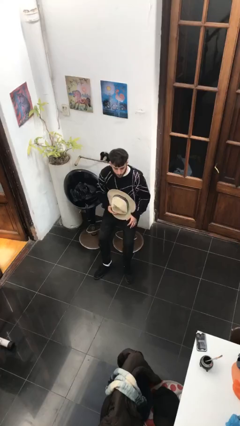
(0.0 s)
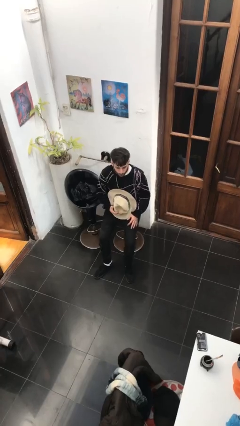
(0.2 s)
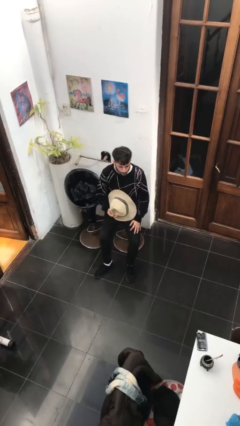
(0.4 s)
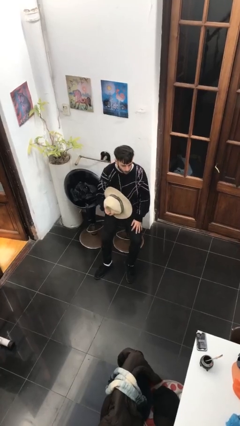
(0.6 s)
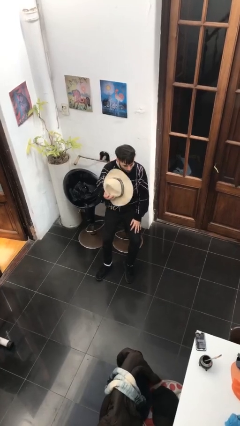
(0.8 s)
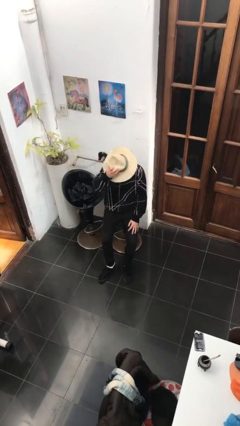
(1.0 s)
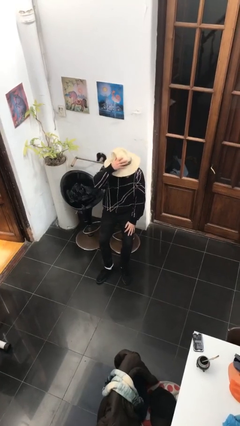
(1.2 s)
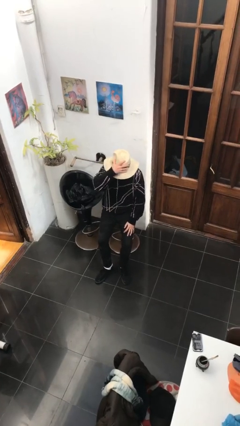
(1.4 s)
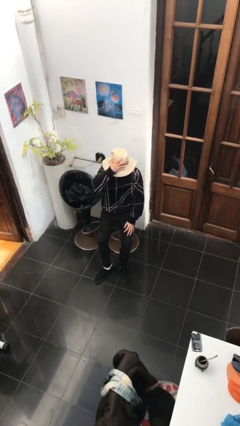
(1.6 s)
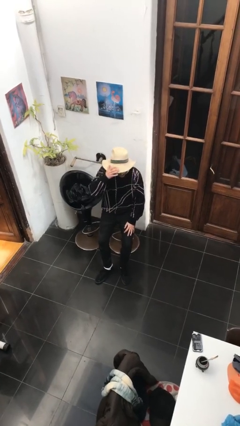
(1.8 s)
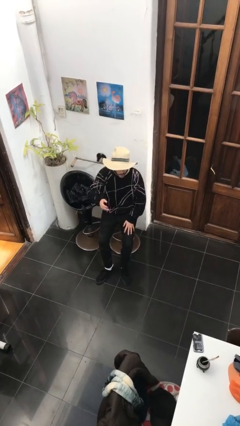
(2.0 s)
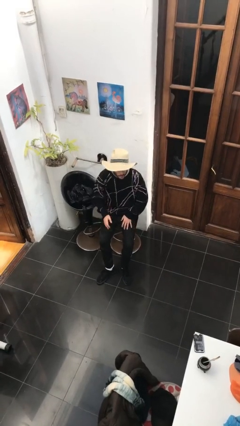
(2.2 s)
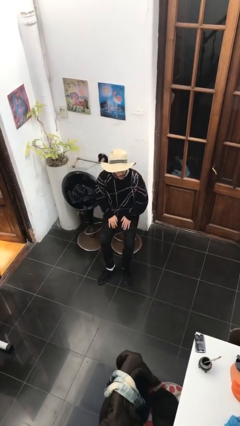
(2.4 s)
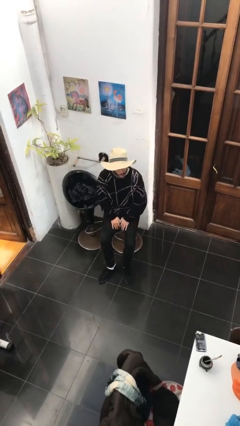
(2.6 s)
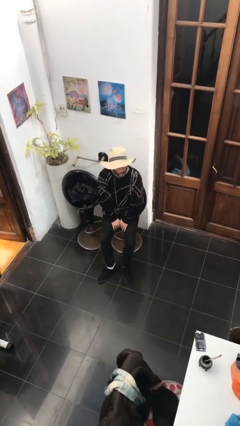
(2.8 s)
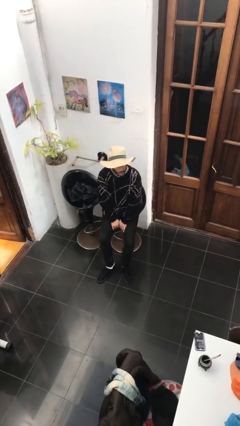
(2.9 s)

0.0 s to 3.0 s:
person puts on hat

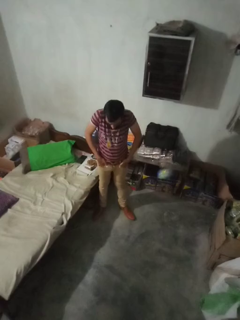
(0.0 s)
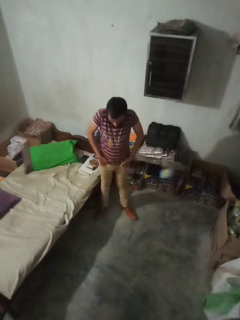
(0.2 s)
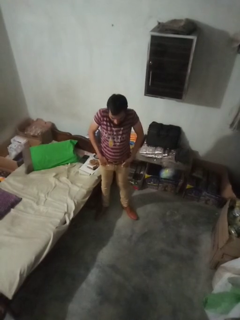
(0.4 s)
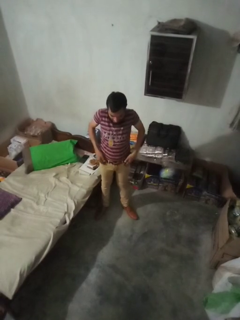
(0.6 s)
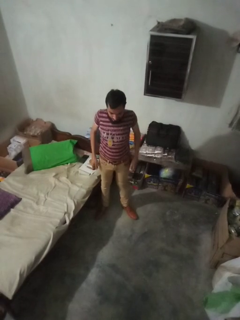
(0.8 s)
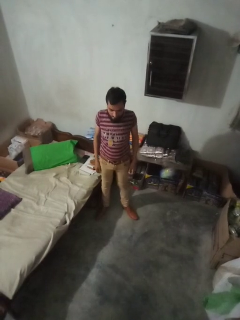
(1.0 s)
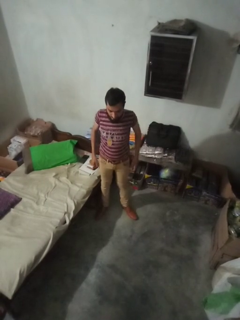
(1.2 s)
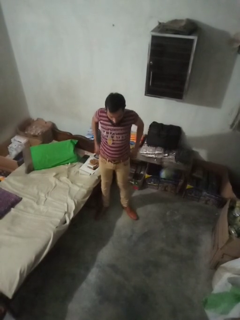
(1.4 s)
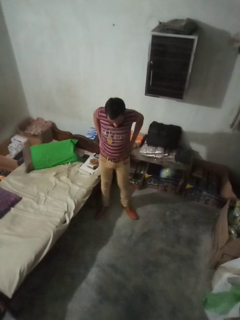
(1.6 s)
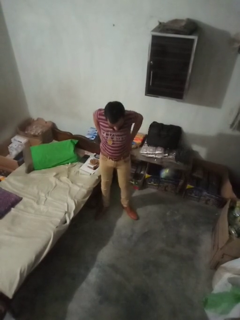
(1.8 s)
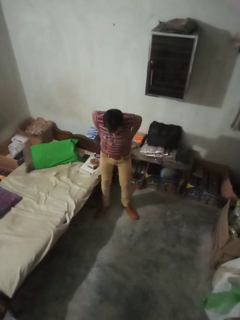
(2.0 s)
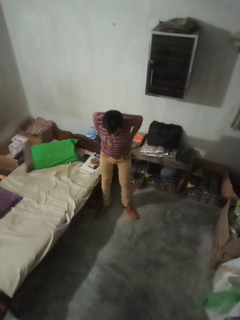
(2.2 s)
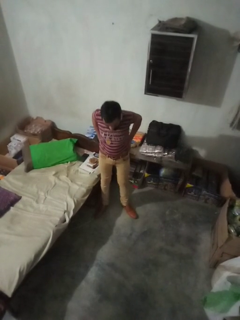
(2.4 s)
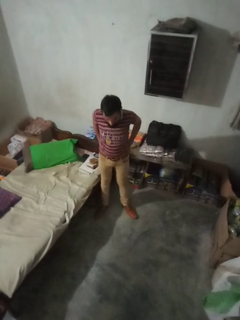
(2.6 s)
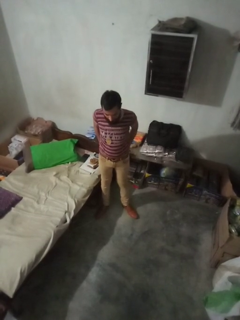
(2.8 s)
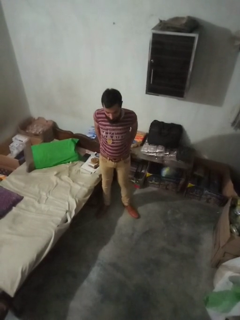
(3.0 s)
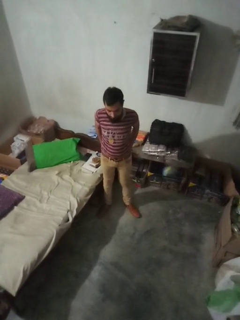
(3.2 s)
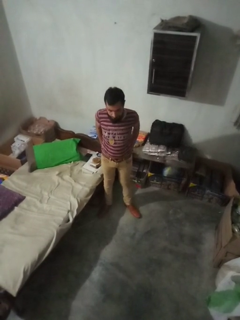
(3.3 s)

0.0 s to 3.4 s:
person puts hands in back pockets

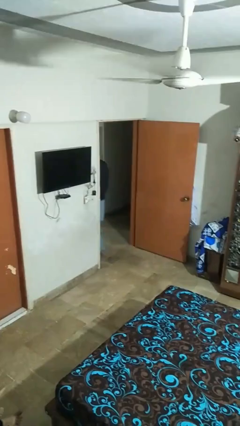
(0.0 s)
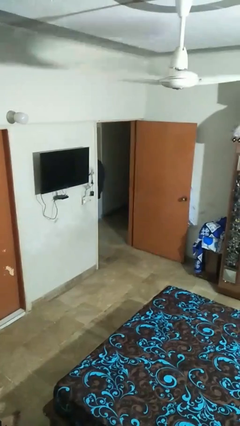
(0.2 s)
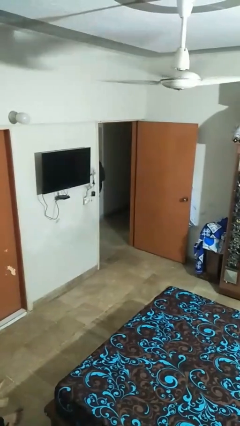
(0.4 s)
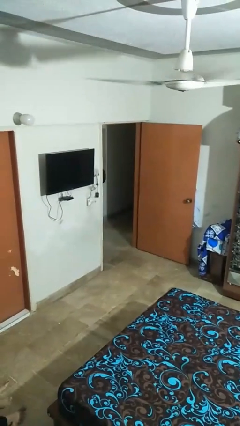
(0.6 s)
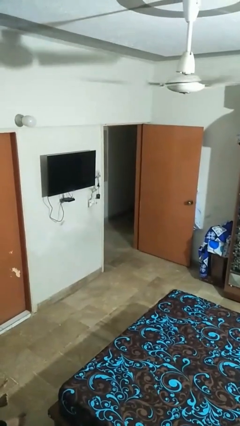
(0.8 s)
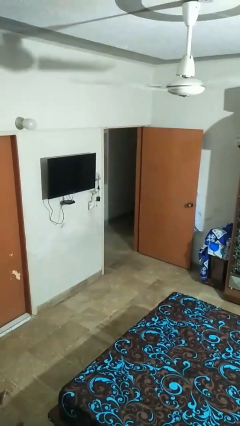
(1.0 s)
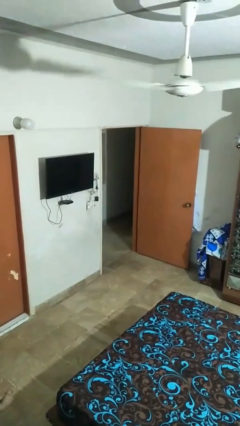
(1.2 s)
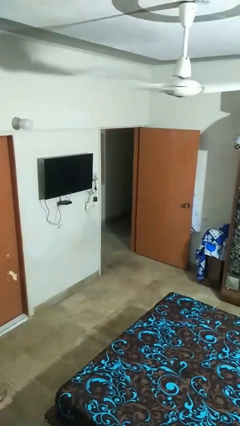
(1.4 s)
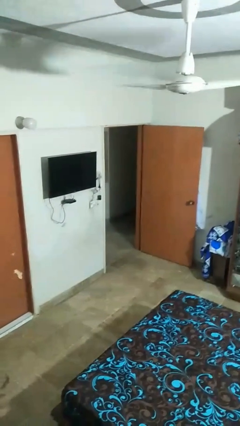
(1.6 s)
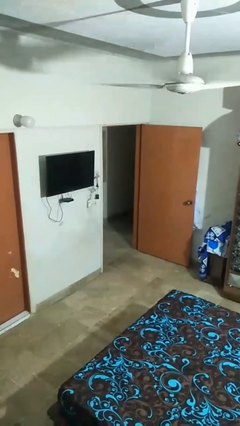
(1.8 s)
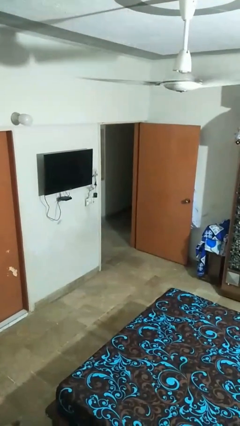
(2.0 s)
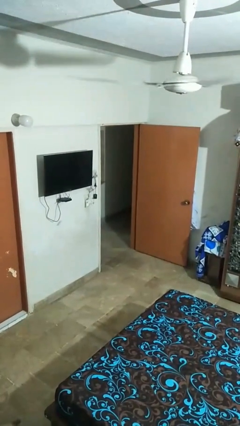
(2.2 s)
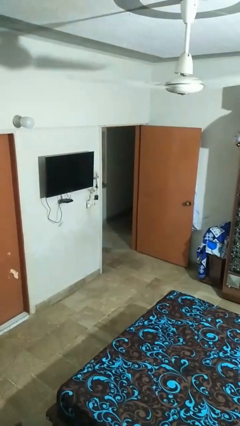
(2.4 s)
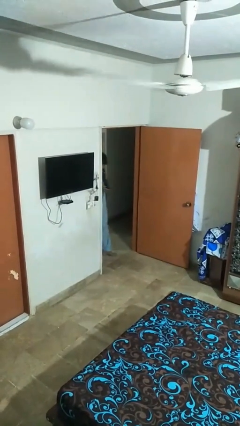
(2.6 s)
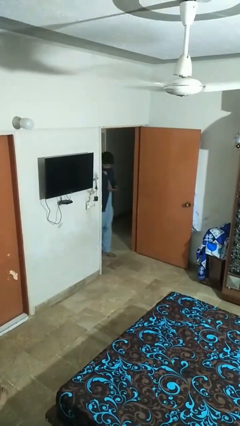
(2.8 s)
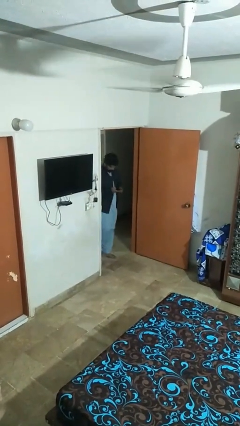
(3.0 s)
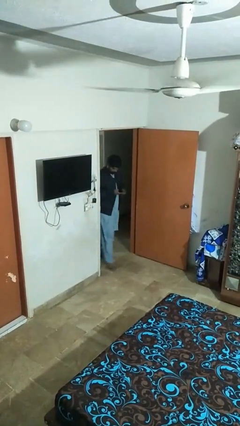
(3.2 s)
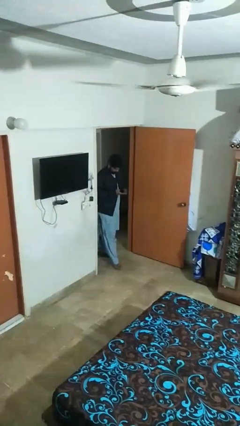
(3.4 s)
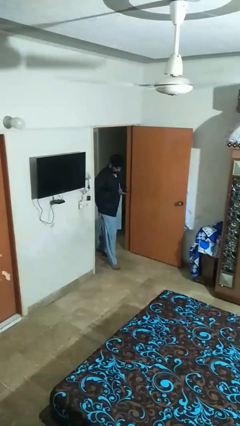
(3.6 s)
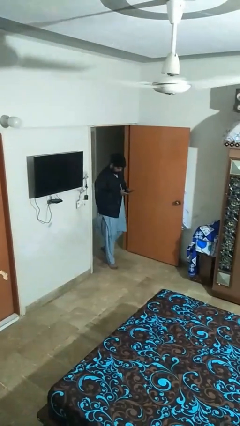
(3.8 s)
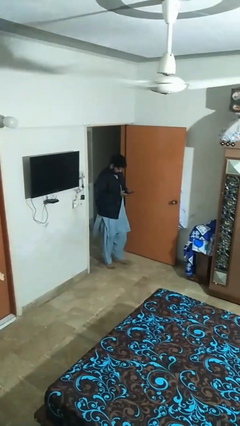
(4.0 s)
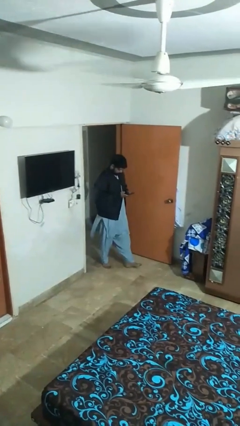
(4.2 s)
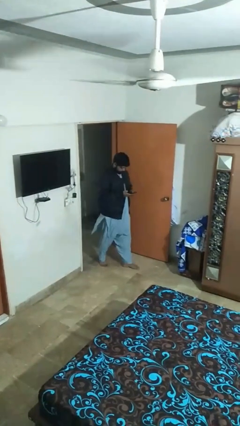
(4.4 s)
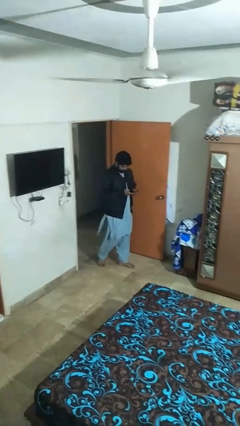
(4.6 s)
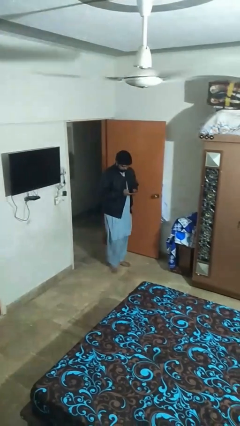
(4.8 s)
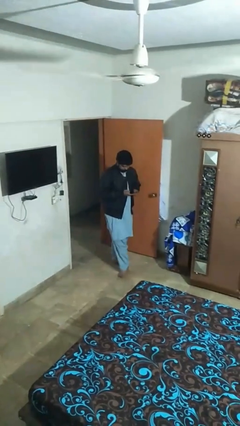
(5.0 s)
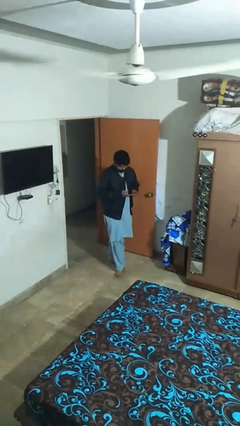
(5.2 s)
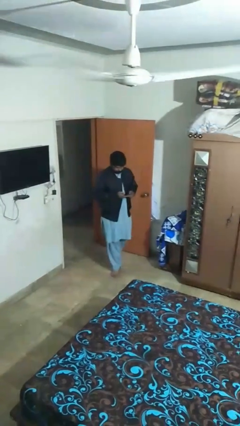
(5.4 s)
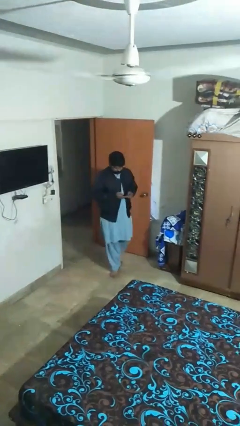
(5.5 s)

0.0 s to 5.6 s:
person enters scene through structure

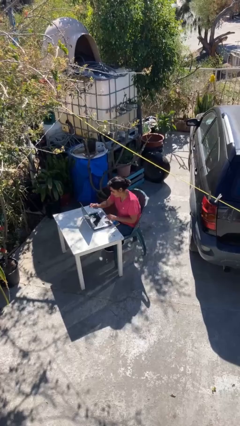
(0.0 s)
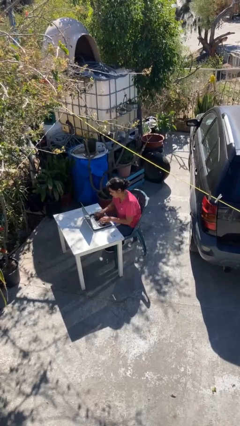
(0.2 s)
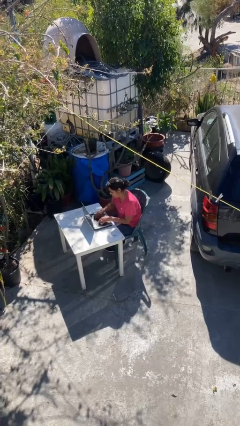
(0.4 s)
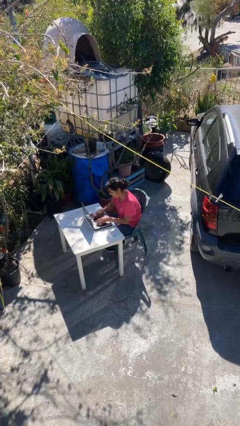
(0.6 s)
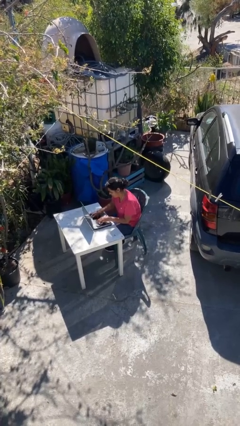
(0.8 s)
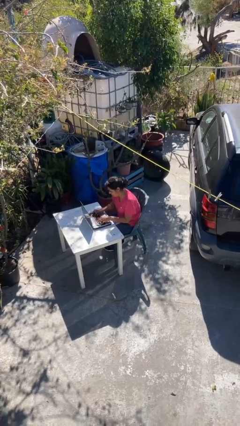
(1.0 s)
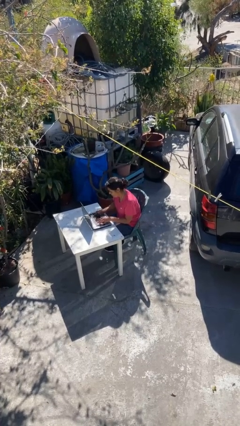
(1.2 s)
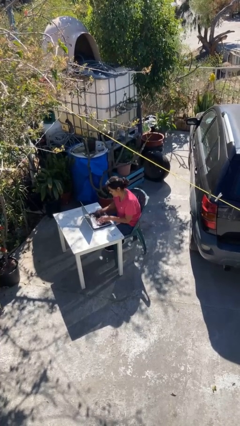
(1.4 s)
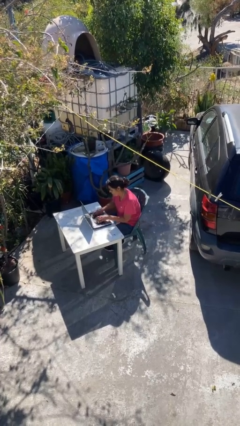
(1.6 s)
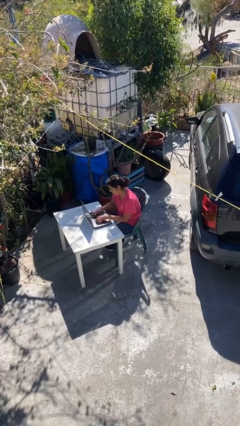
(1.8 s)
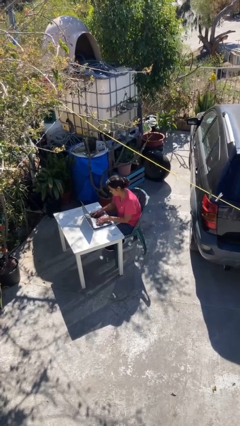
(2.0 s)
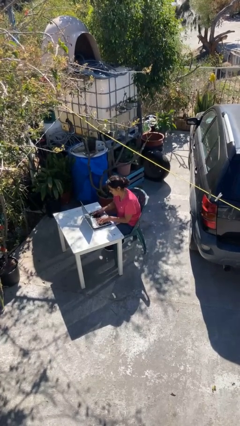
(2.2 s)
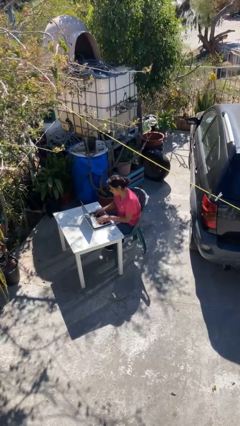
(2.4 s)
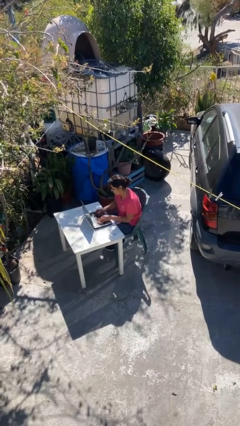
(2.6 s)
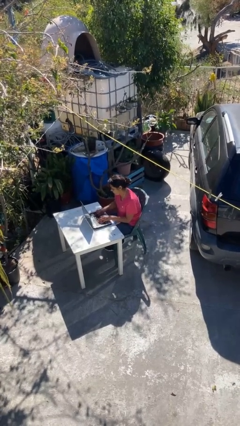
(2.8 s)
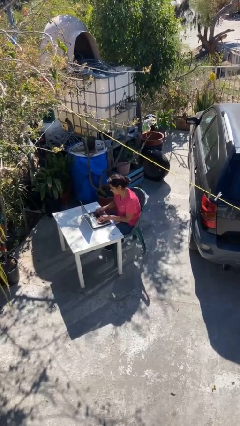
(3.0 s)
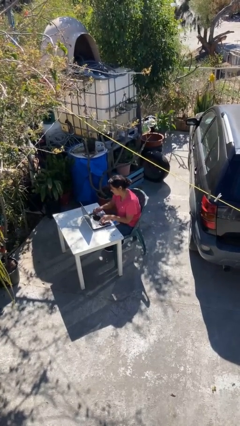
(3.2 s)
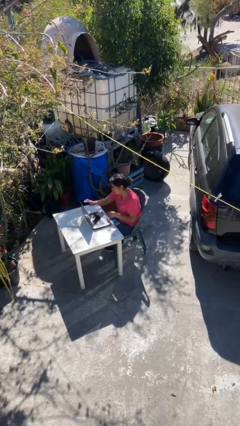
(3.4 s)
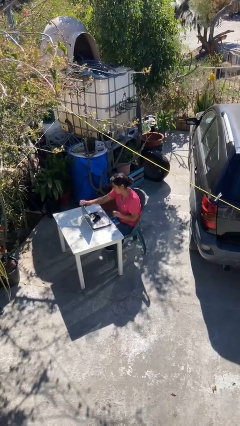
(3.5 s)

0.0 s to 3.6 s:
person interacts with laptop

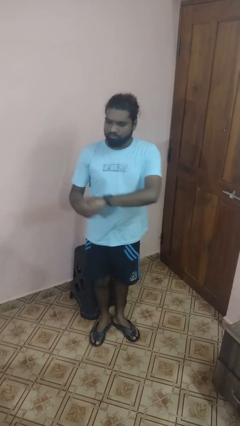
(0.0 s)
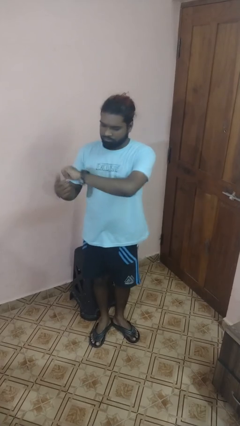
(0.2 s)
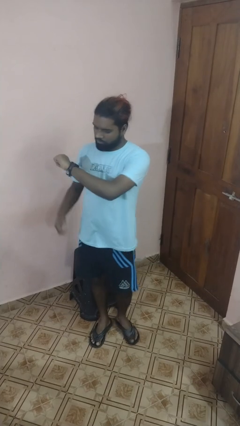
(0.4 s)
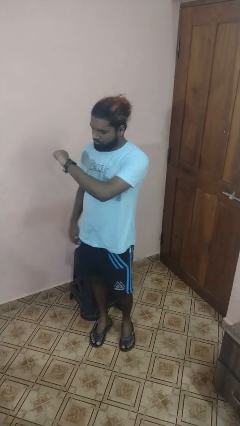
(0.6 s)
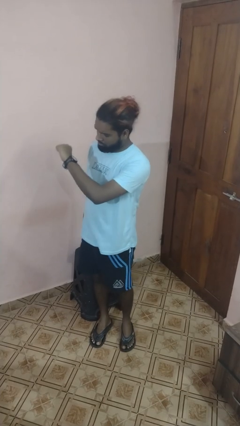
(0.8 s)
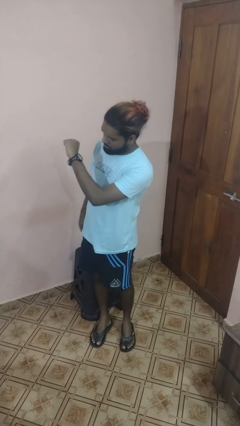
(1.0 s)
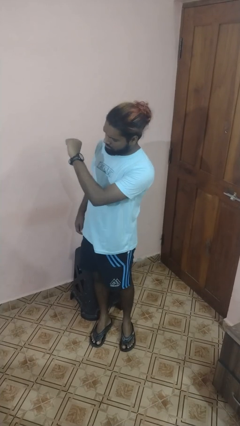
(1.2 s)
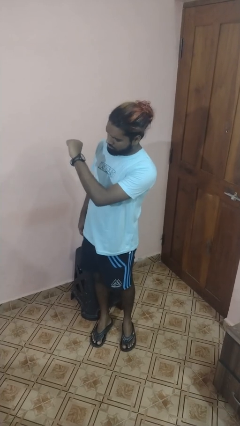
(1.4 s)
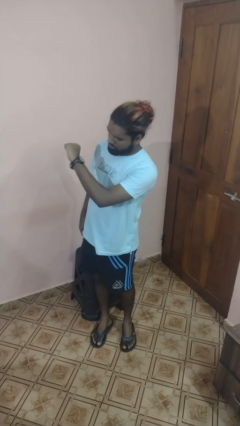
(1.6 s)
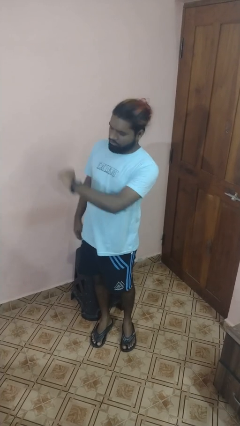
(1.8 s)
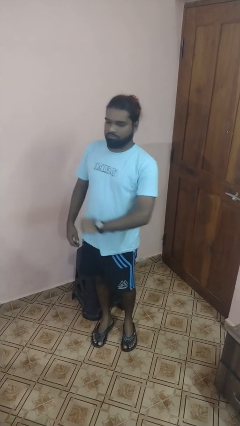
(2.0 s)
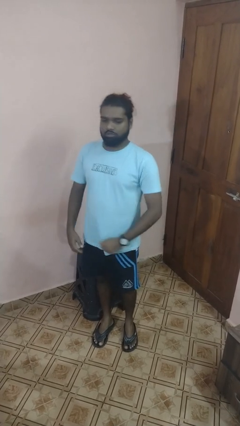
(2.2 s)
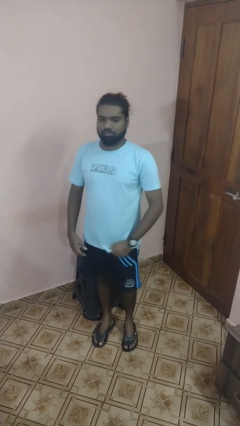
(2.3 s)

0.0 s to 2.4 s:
person looks at wristwatch

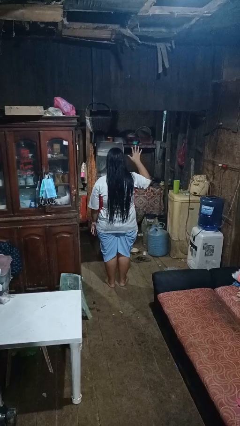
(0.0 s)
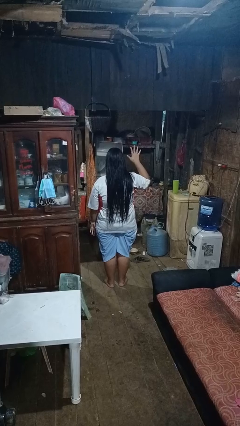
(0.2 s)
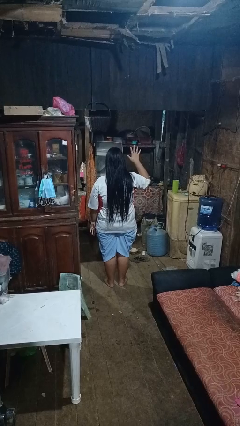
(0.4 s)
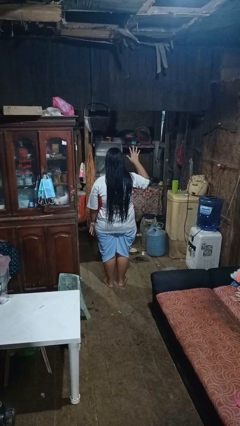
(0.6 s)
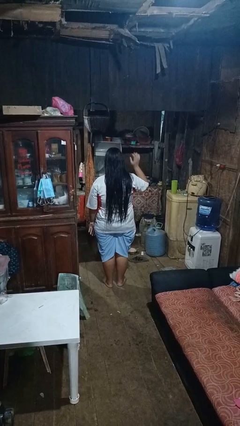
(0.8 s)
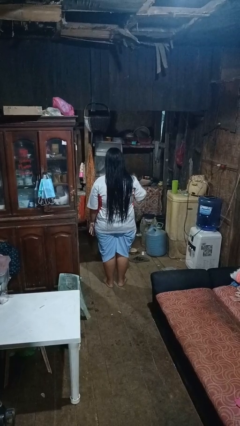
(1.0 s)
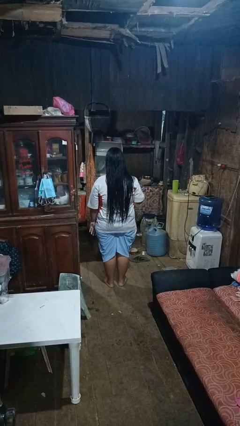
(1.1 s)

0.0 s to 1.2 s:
person gestures number five
